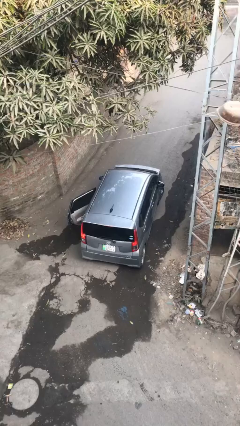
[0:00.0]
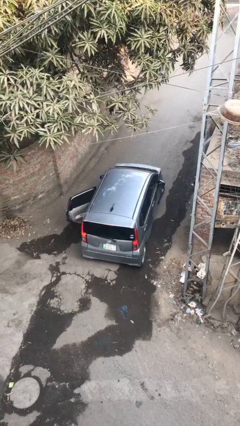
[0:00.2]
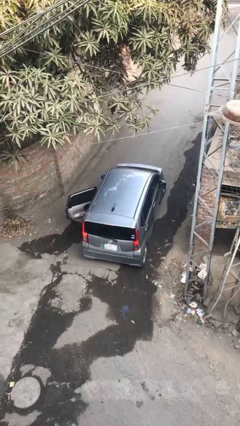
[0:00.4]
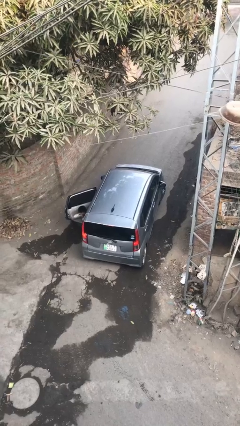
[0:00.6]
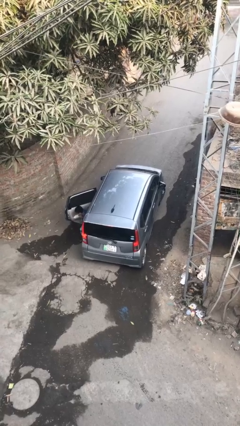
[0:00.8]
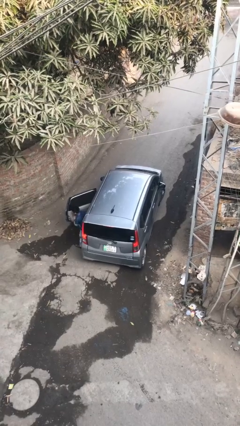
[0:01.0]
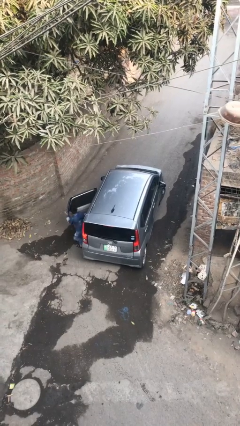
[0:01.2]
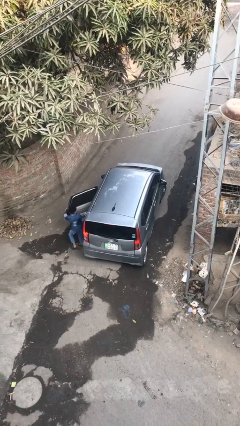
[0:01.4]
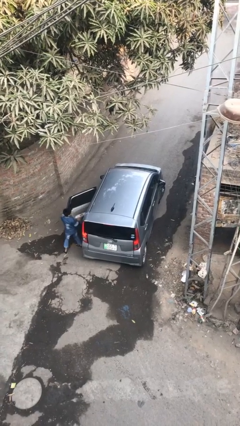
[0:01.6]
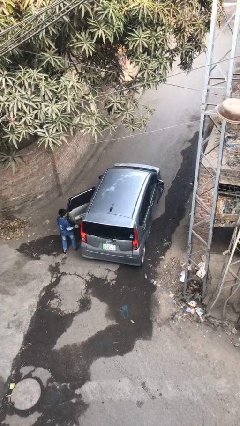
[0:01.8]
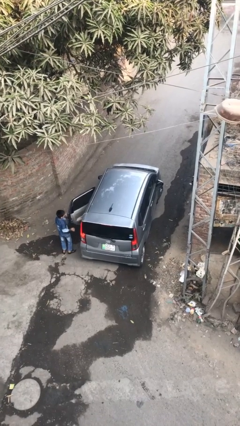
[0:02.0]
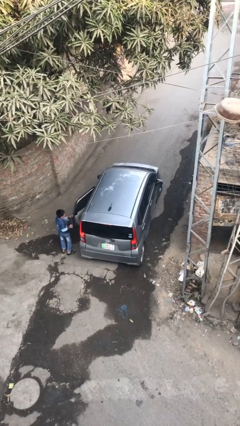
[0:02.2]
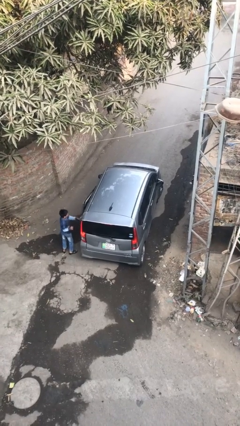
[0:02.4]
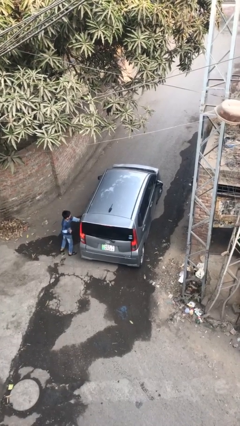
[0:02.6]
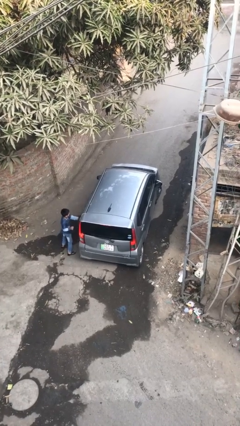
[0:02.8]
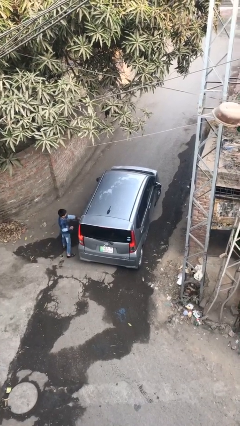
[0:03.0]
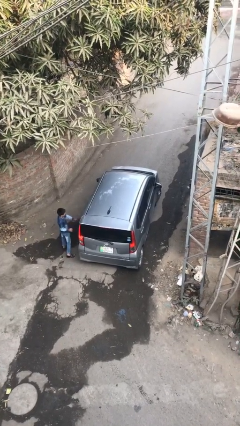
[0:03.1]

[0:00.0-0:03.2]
car drops off person

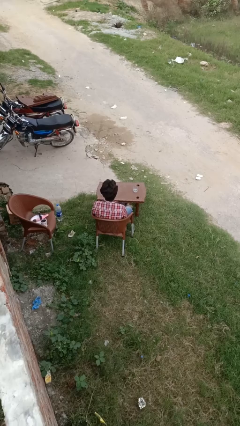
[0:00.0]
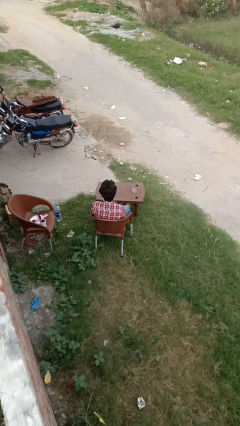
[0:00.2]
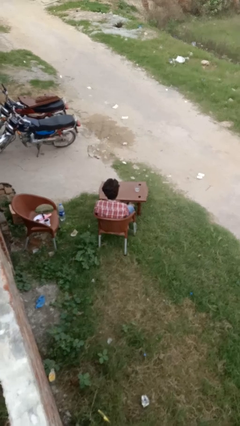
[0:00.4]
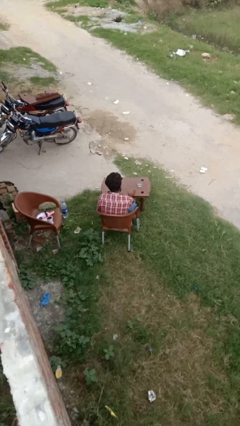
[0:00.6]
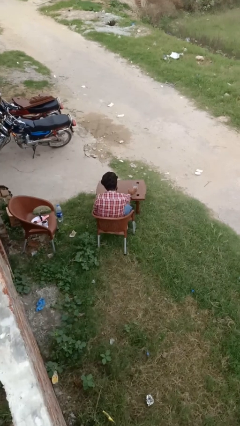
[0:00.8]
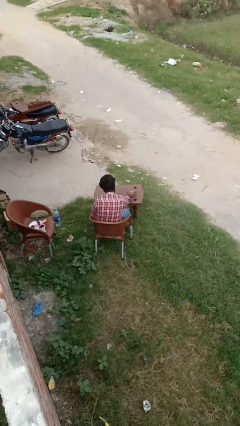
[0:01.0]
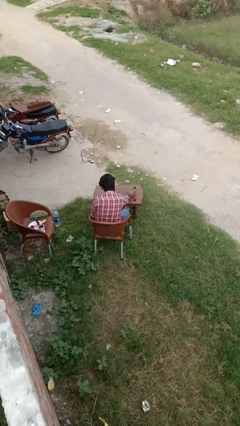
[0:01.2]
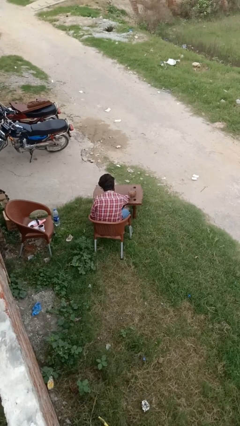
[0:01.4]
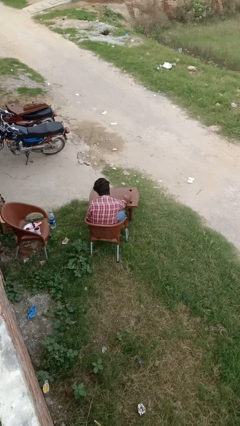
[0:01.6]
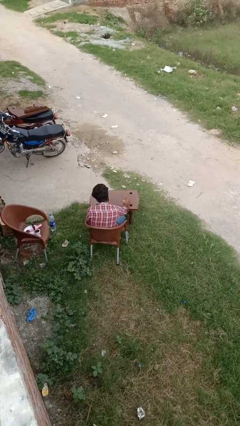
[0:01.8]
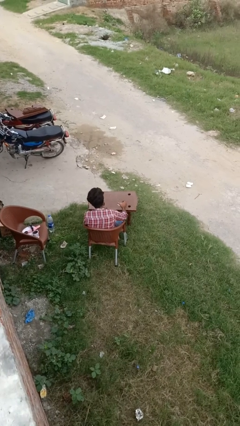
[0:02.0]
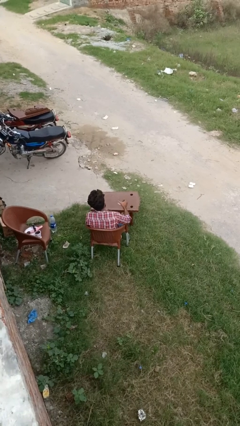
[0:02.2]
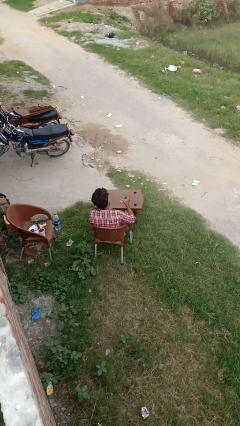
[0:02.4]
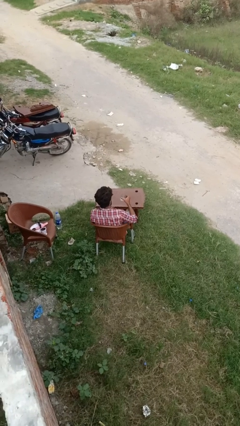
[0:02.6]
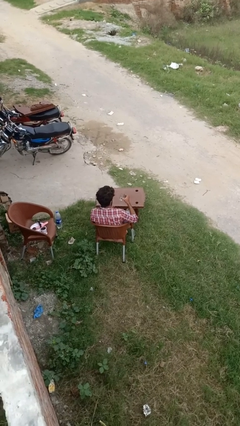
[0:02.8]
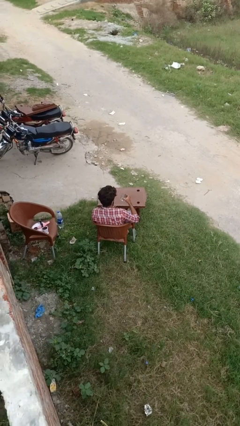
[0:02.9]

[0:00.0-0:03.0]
person picks up object from table

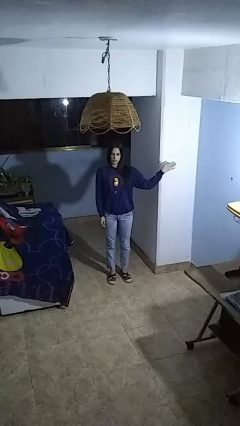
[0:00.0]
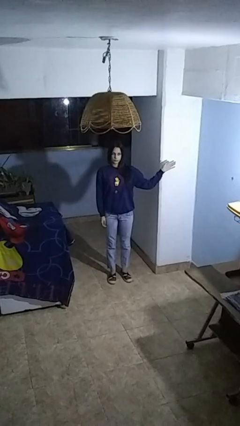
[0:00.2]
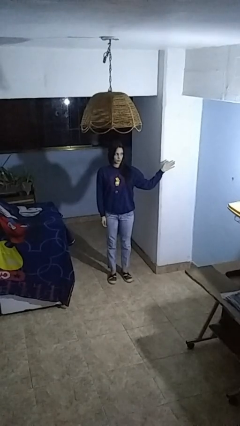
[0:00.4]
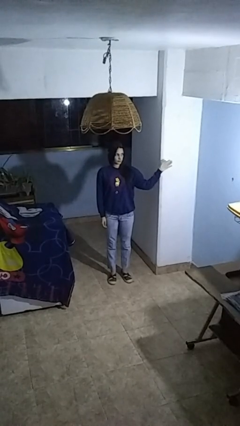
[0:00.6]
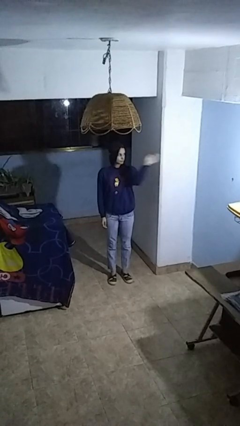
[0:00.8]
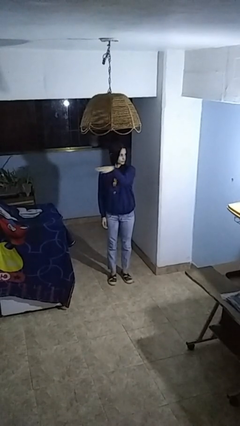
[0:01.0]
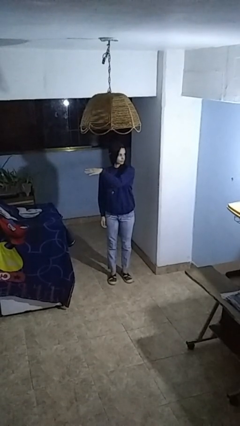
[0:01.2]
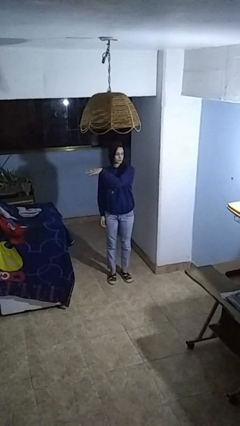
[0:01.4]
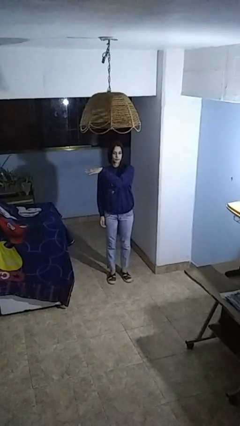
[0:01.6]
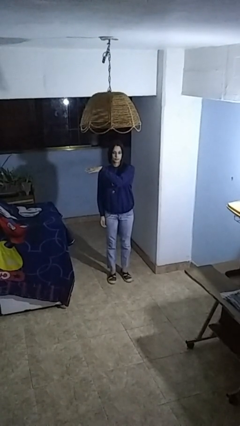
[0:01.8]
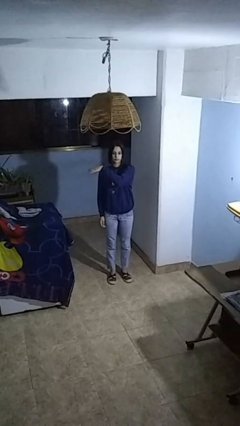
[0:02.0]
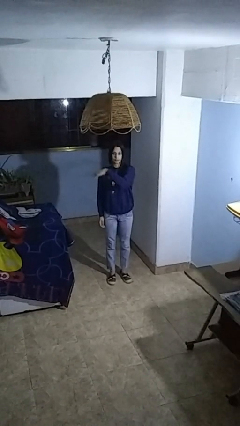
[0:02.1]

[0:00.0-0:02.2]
person gestures swipe right

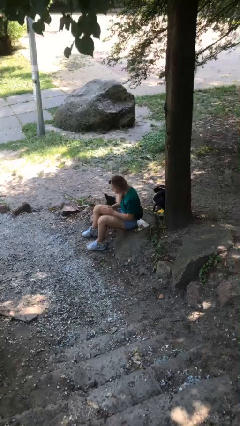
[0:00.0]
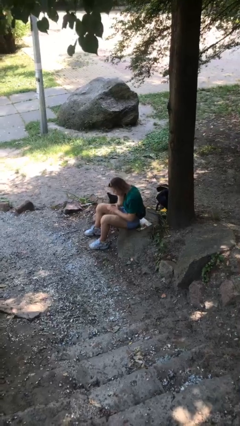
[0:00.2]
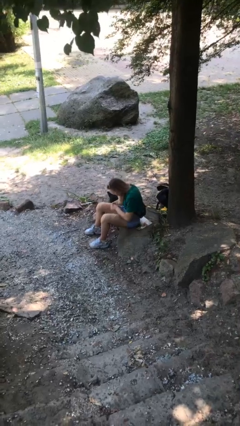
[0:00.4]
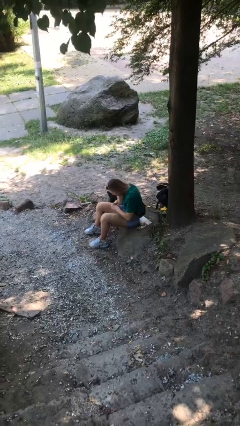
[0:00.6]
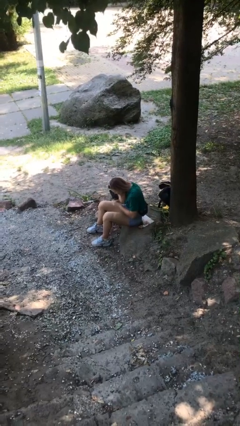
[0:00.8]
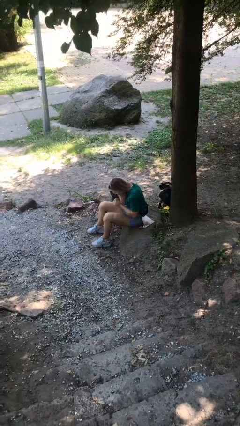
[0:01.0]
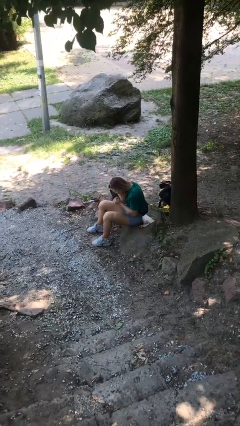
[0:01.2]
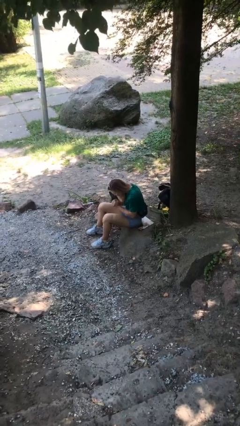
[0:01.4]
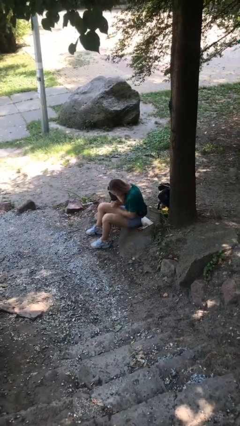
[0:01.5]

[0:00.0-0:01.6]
person looks at hands in lap

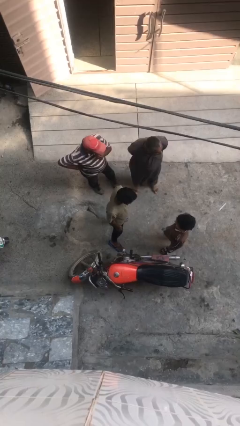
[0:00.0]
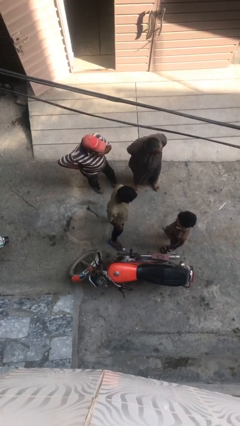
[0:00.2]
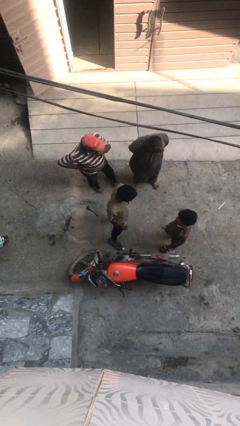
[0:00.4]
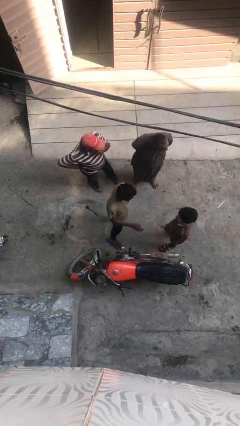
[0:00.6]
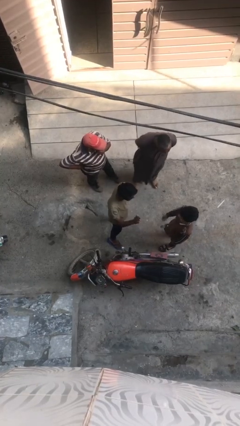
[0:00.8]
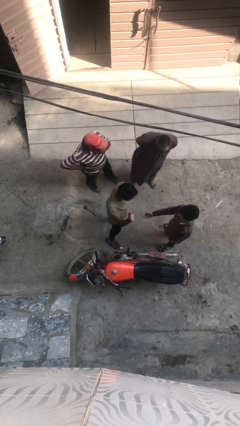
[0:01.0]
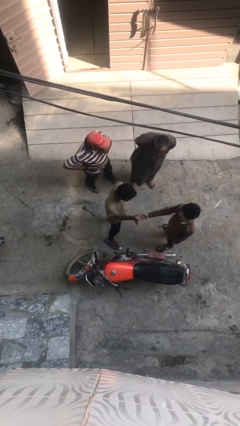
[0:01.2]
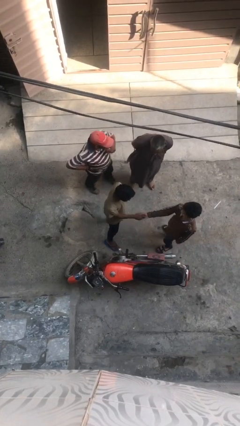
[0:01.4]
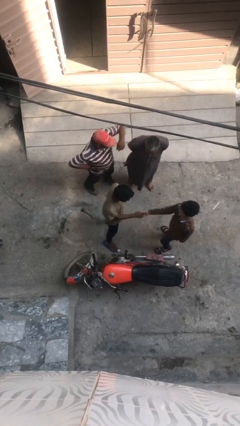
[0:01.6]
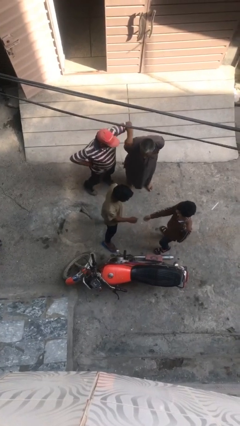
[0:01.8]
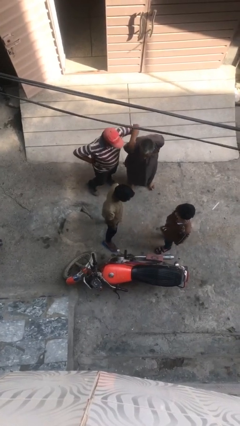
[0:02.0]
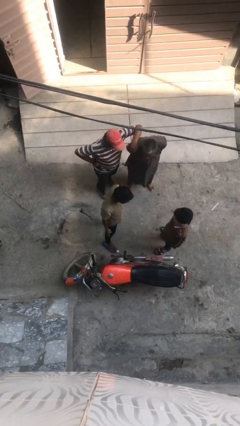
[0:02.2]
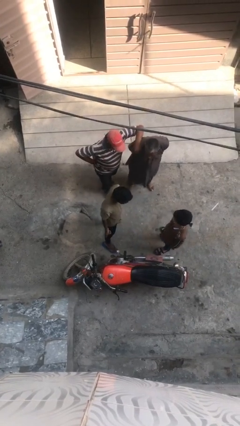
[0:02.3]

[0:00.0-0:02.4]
person laughs with person

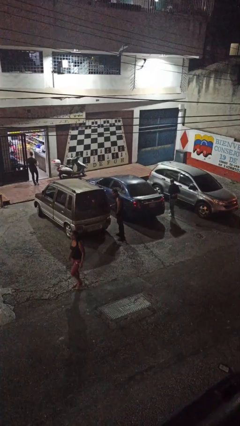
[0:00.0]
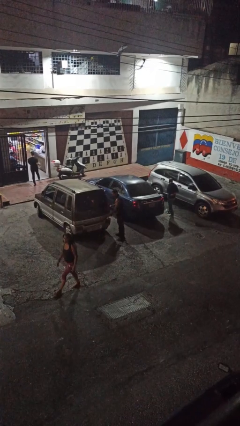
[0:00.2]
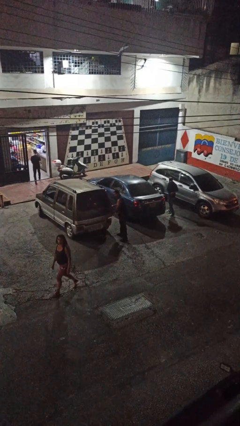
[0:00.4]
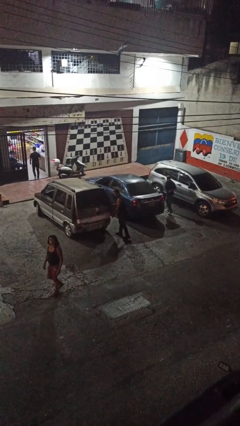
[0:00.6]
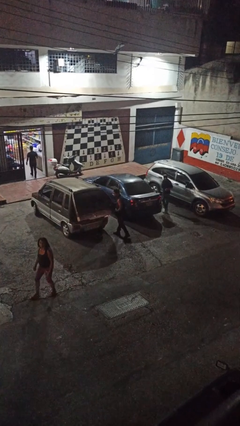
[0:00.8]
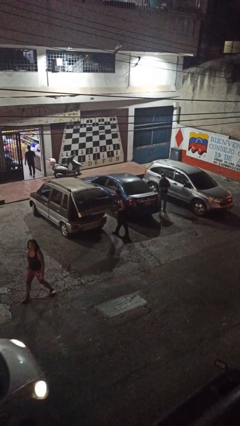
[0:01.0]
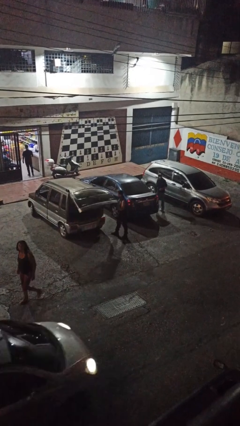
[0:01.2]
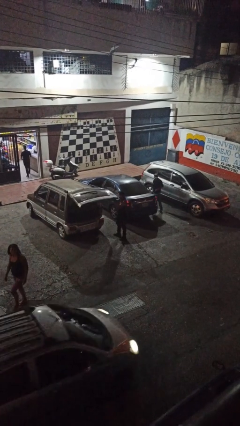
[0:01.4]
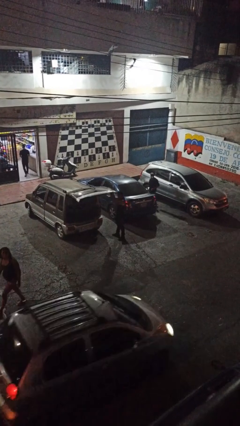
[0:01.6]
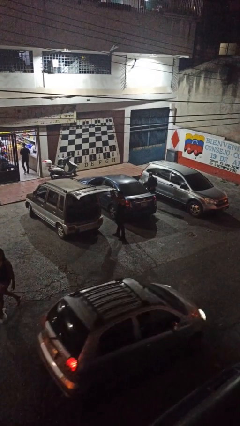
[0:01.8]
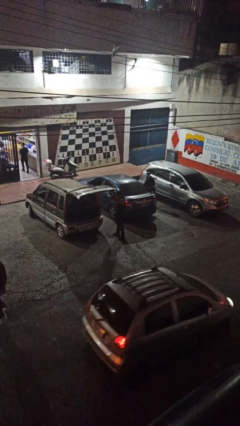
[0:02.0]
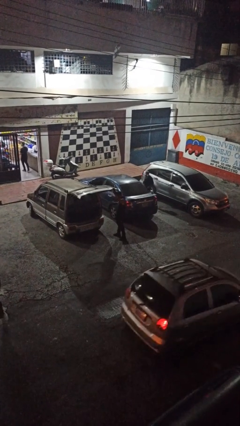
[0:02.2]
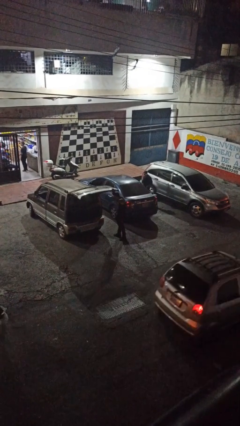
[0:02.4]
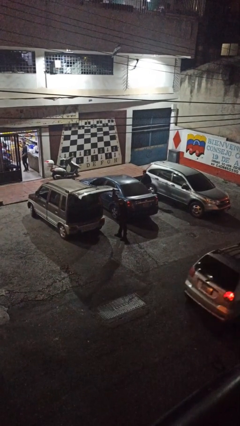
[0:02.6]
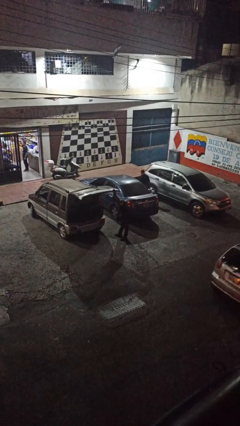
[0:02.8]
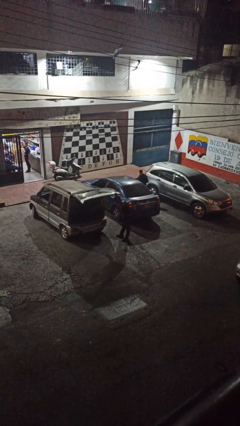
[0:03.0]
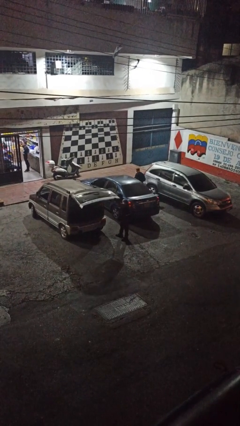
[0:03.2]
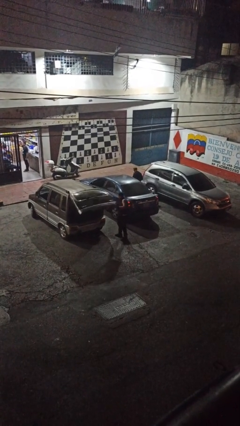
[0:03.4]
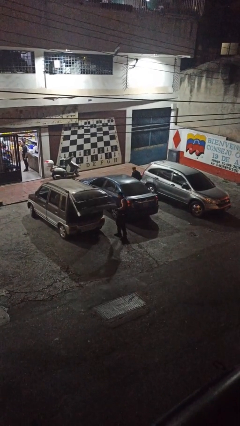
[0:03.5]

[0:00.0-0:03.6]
person opens car trunk

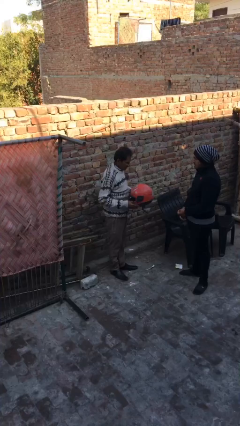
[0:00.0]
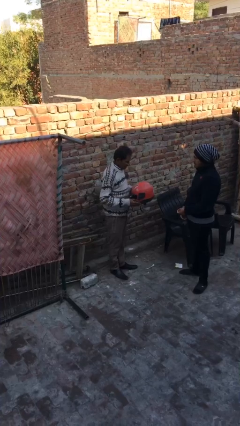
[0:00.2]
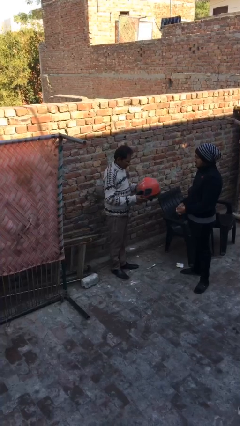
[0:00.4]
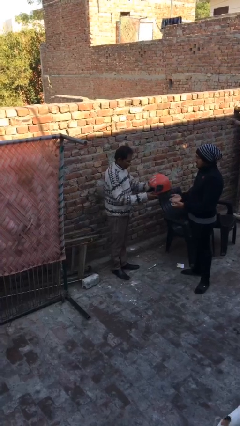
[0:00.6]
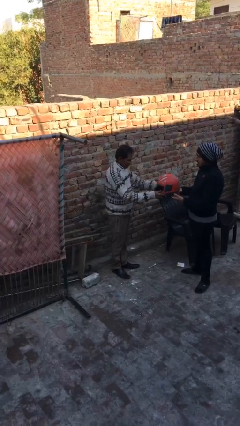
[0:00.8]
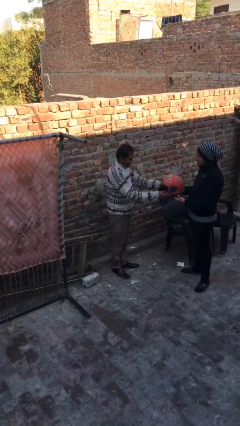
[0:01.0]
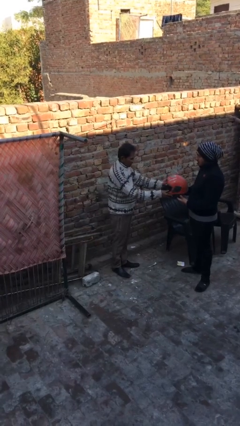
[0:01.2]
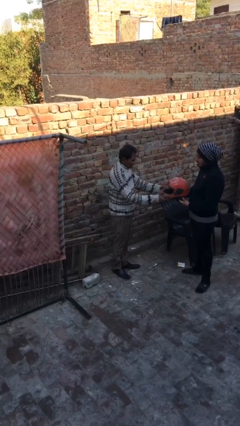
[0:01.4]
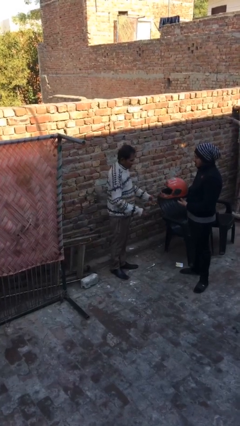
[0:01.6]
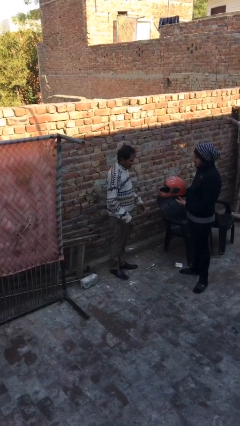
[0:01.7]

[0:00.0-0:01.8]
person transfers object to person
